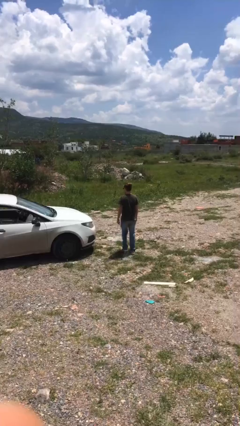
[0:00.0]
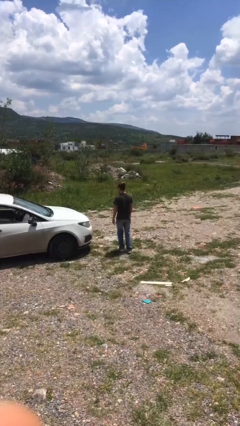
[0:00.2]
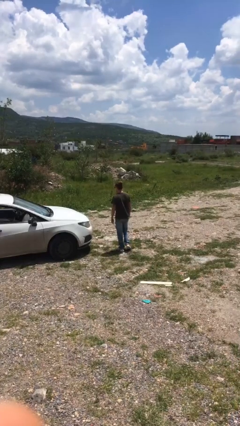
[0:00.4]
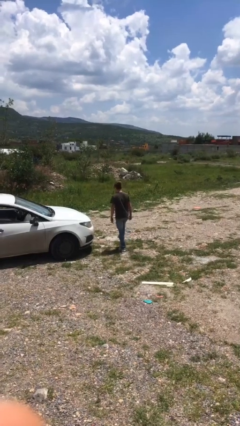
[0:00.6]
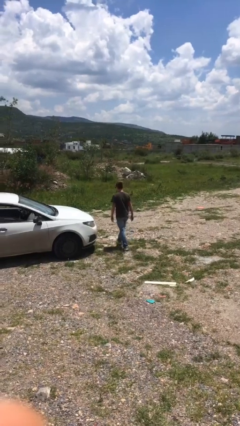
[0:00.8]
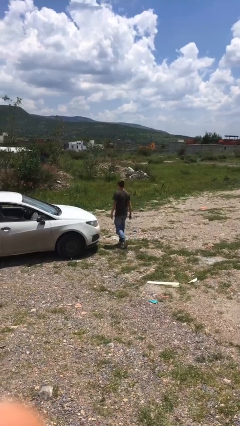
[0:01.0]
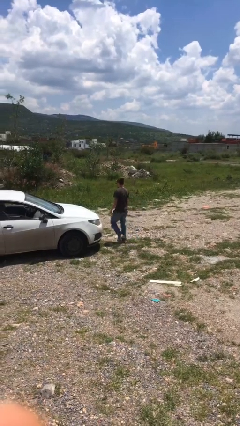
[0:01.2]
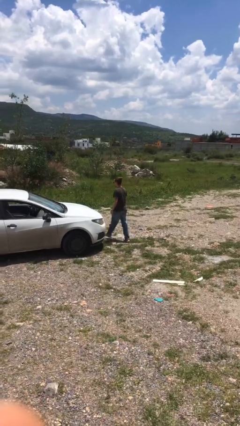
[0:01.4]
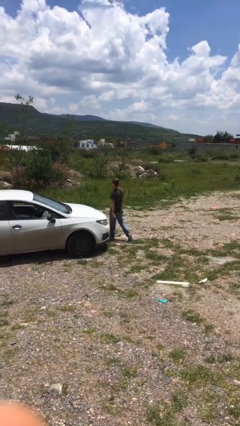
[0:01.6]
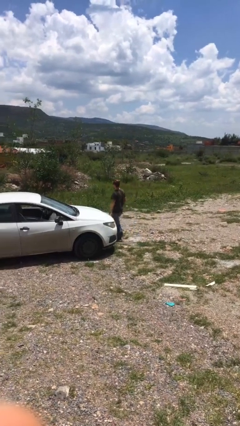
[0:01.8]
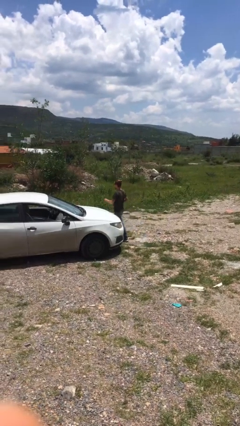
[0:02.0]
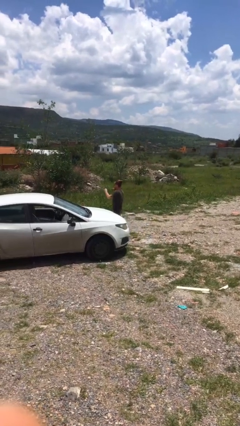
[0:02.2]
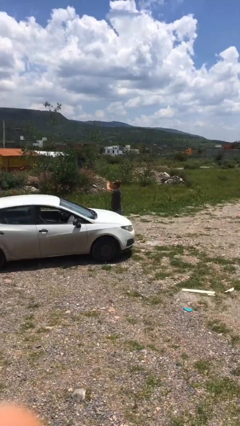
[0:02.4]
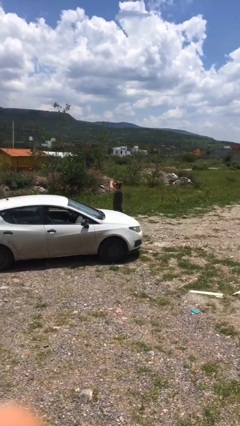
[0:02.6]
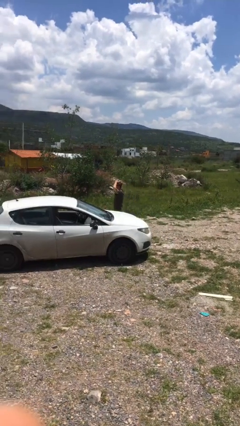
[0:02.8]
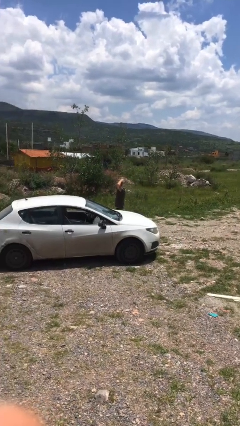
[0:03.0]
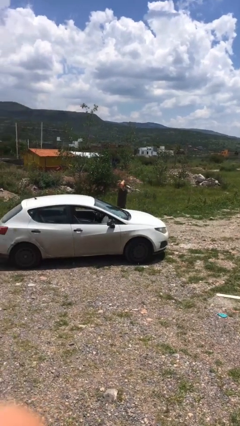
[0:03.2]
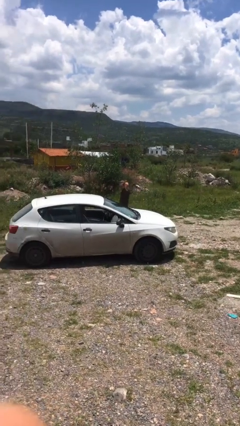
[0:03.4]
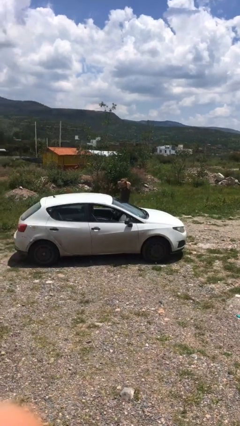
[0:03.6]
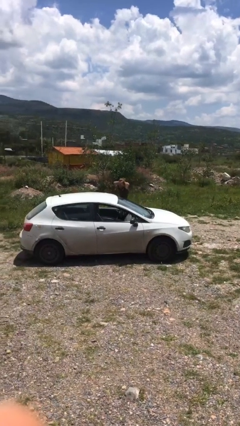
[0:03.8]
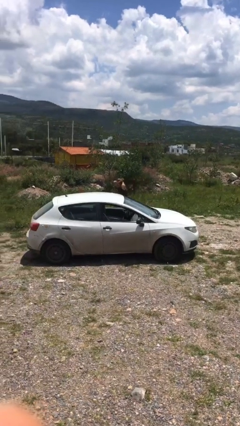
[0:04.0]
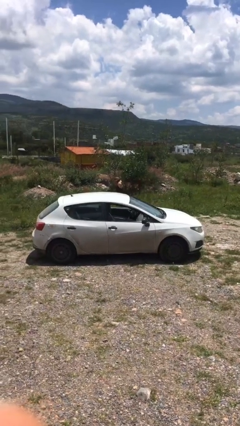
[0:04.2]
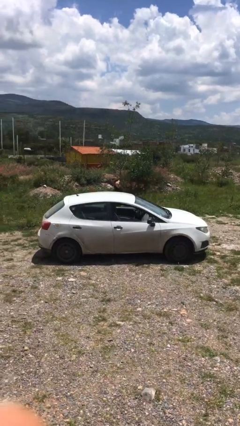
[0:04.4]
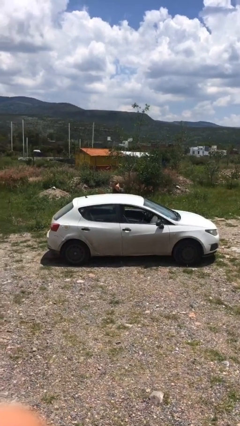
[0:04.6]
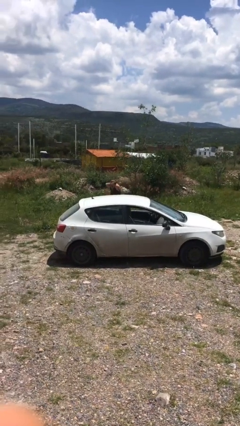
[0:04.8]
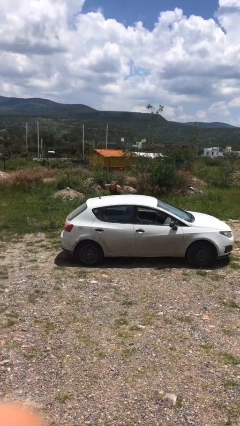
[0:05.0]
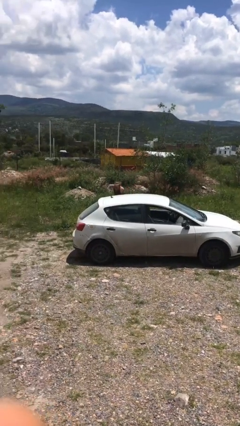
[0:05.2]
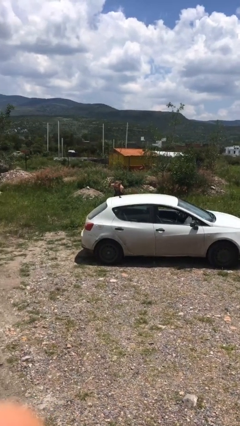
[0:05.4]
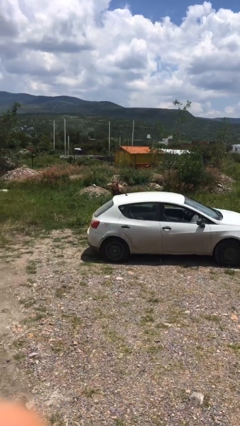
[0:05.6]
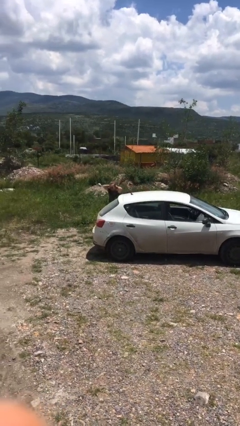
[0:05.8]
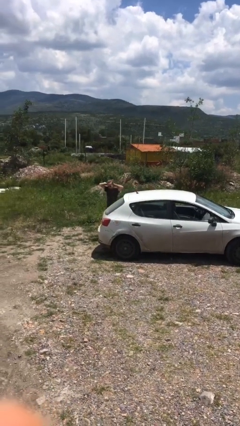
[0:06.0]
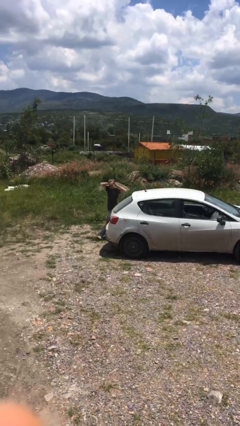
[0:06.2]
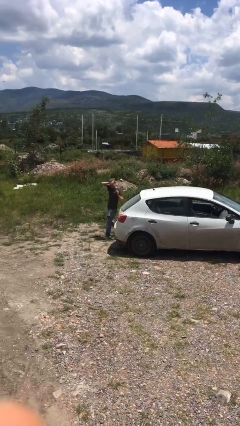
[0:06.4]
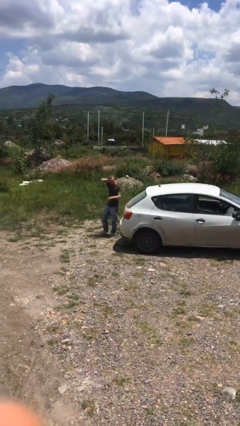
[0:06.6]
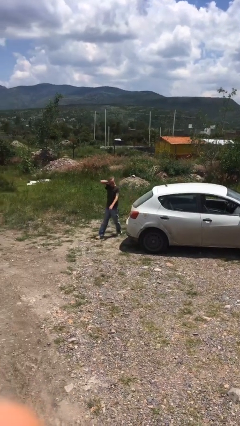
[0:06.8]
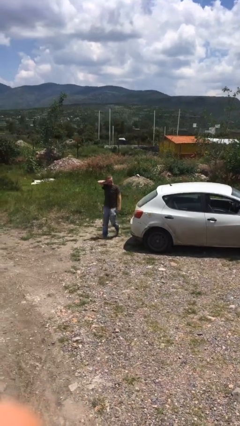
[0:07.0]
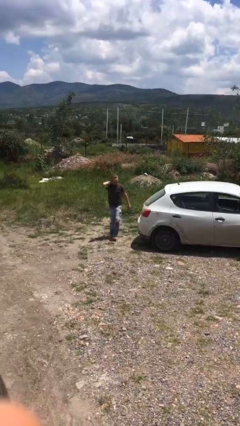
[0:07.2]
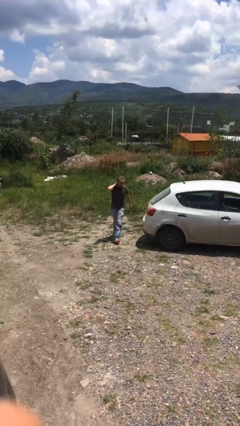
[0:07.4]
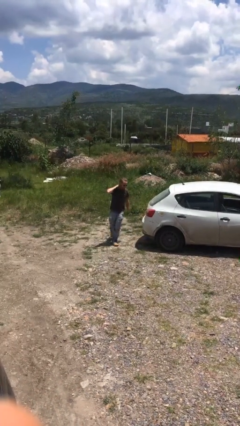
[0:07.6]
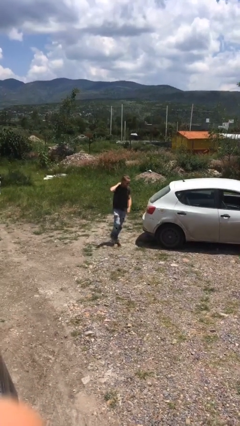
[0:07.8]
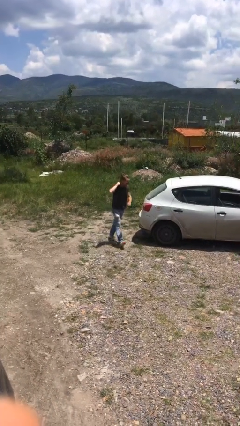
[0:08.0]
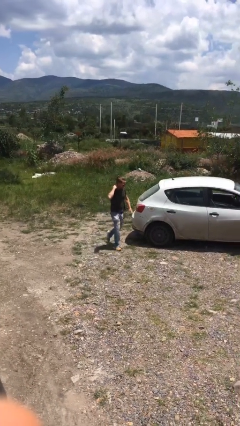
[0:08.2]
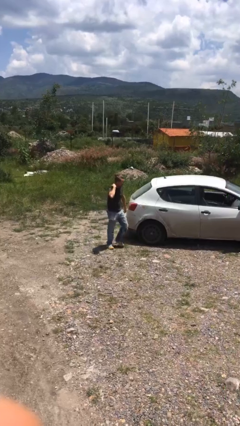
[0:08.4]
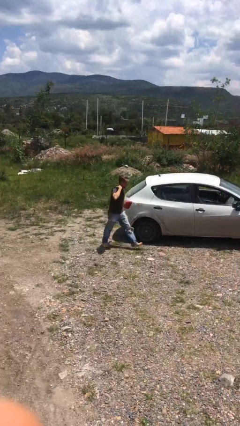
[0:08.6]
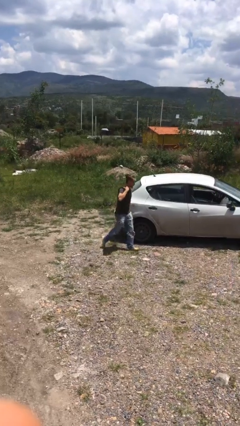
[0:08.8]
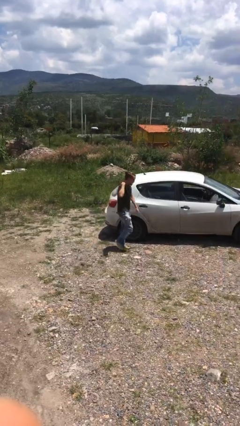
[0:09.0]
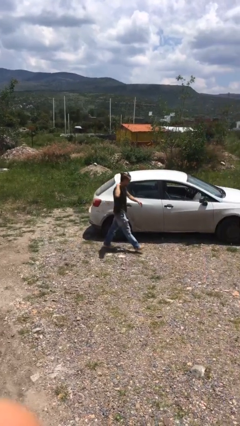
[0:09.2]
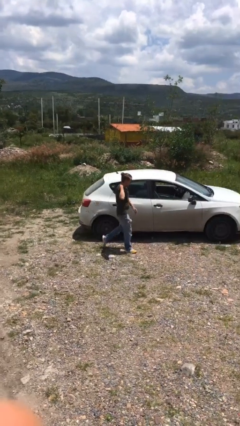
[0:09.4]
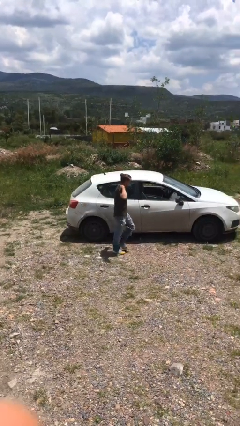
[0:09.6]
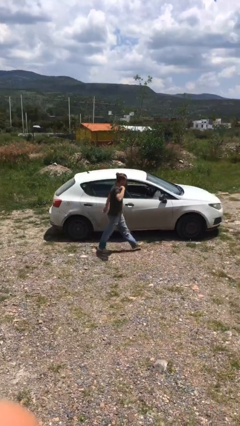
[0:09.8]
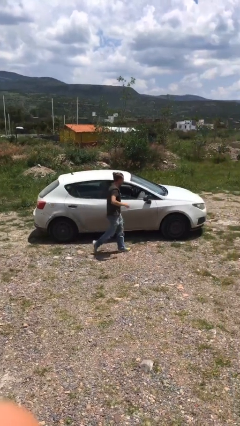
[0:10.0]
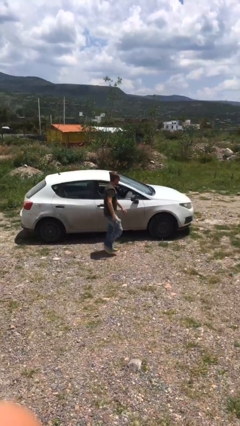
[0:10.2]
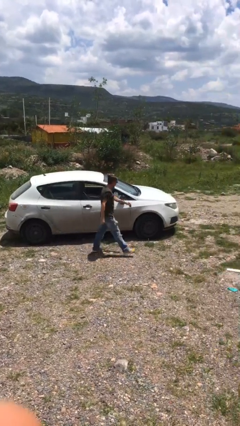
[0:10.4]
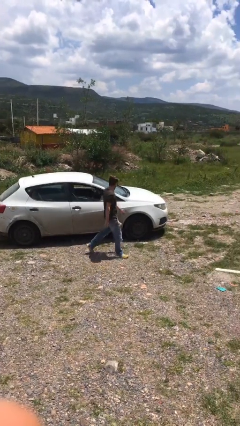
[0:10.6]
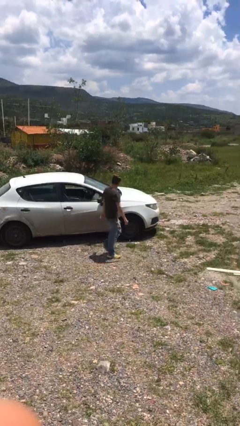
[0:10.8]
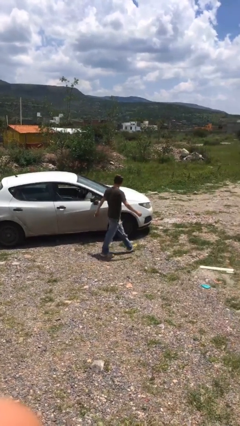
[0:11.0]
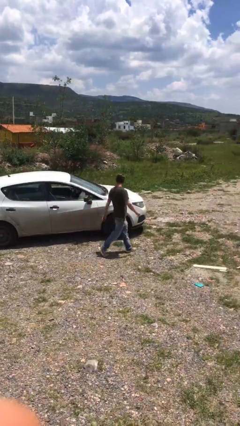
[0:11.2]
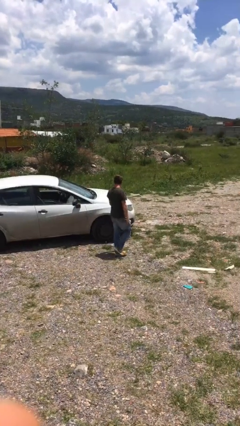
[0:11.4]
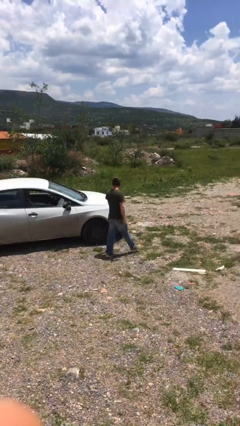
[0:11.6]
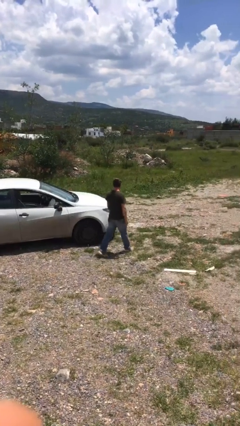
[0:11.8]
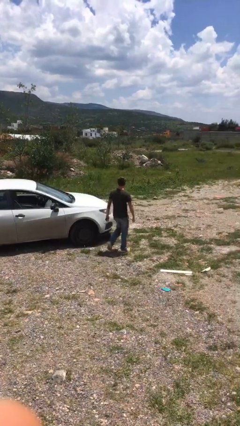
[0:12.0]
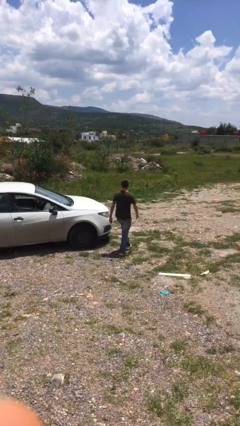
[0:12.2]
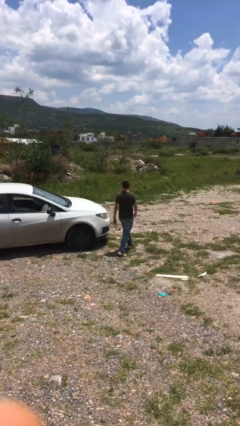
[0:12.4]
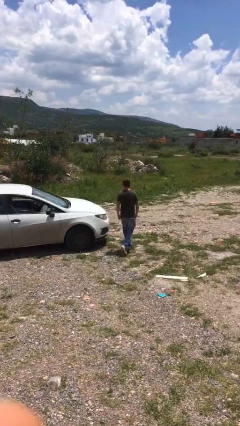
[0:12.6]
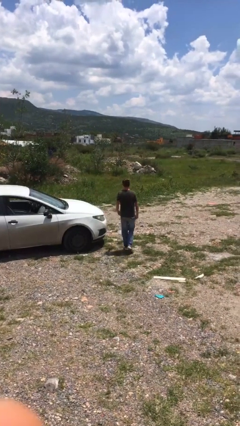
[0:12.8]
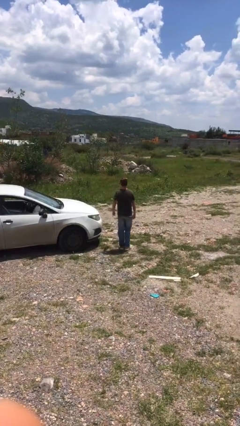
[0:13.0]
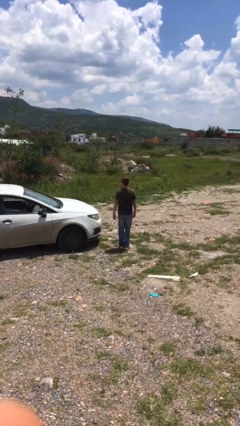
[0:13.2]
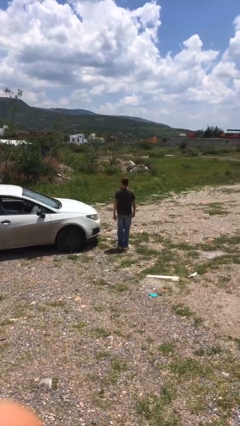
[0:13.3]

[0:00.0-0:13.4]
person walks around car

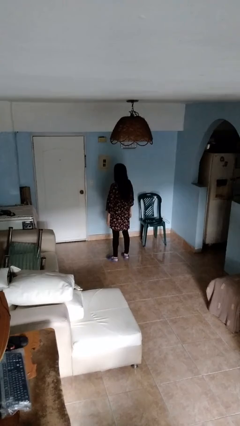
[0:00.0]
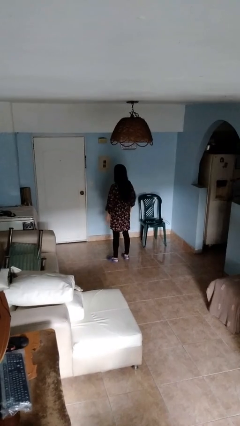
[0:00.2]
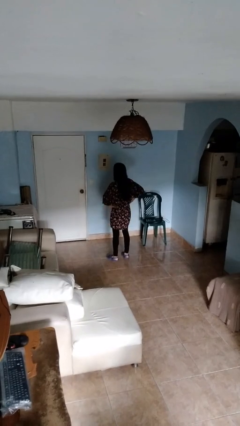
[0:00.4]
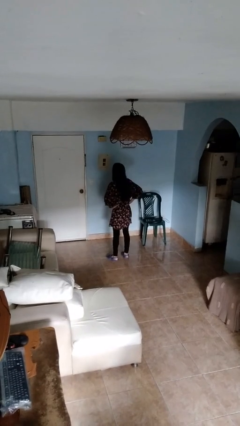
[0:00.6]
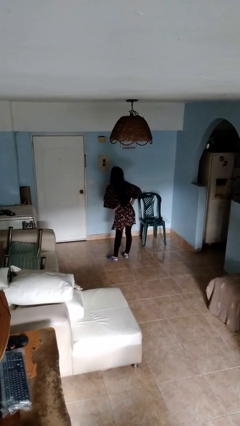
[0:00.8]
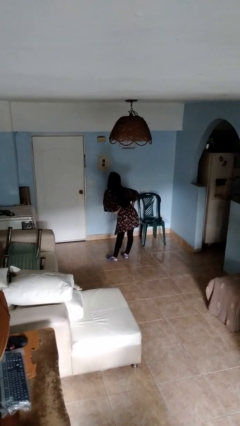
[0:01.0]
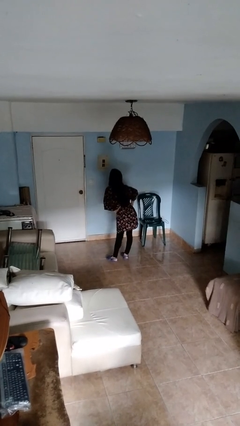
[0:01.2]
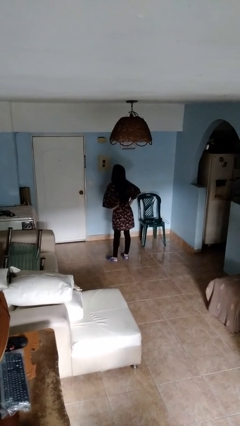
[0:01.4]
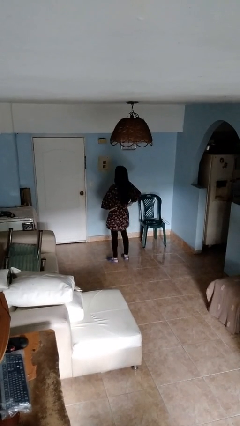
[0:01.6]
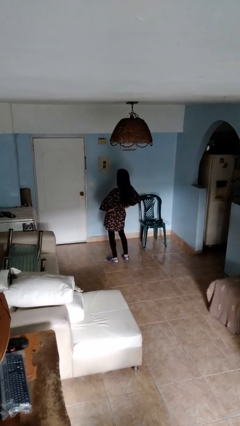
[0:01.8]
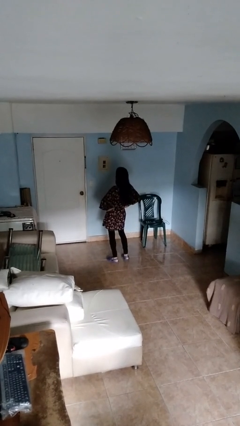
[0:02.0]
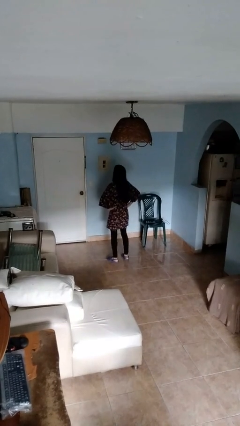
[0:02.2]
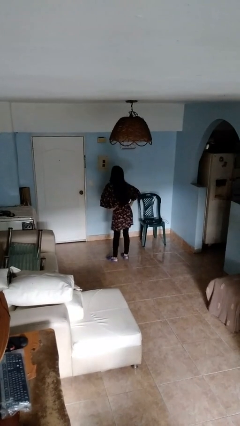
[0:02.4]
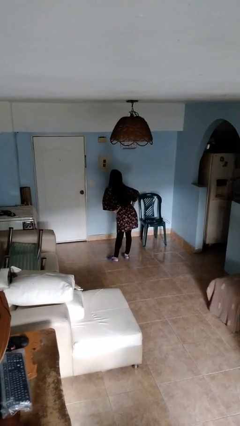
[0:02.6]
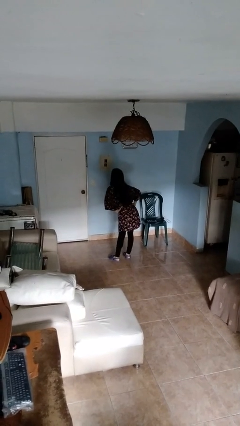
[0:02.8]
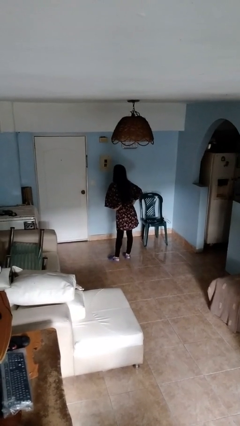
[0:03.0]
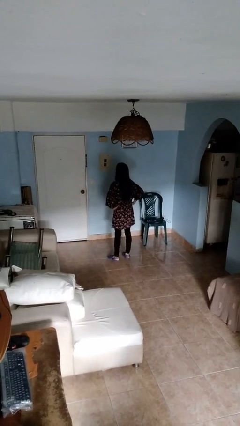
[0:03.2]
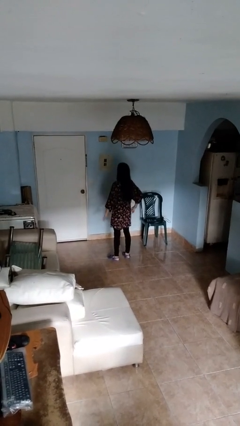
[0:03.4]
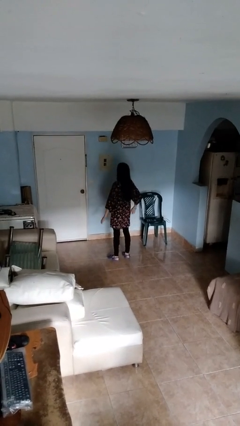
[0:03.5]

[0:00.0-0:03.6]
person wiggles hips

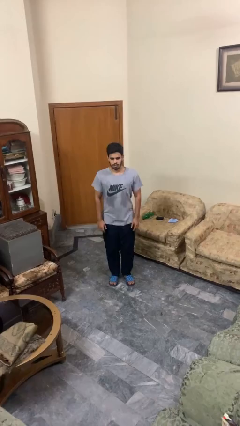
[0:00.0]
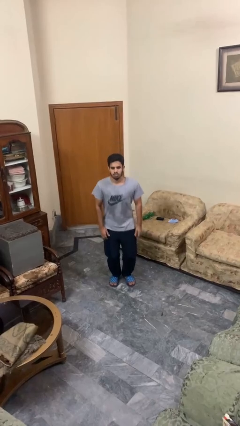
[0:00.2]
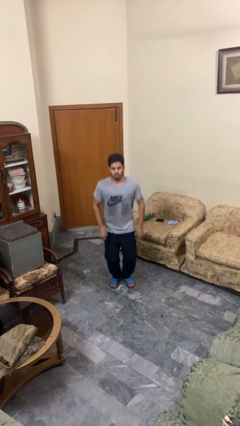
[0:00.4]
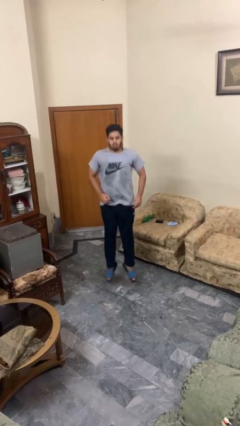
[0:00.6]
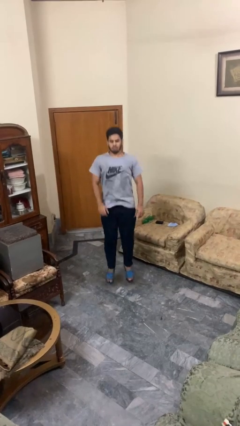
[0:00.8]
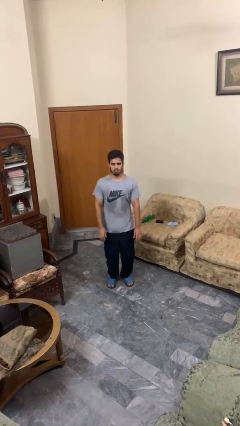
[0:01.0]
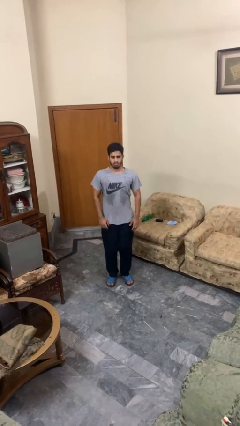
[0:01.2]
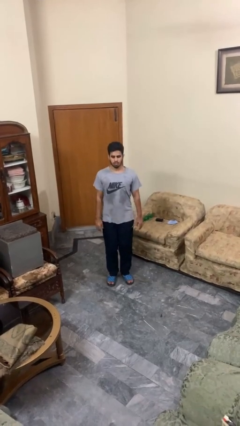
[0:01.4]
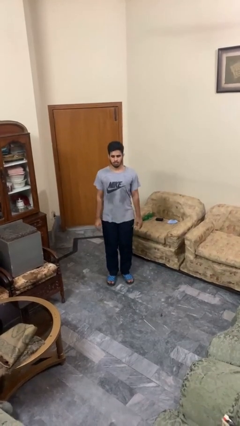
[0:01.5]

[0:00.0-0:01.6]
person jumps
